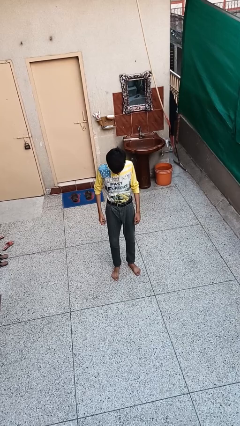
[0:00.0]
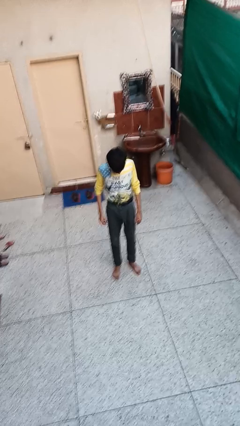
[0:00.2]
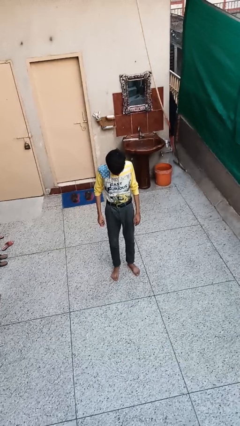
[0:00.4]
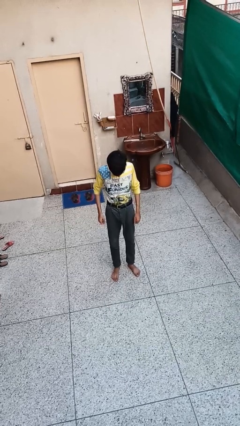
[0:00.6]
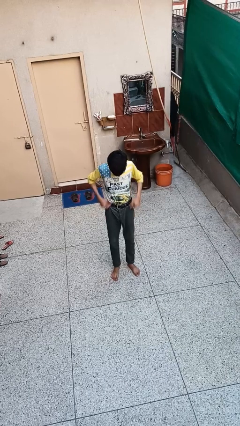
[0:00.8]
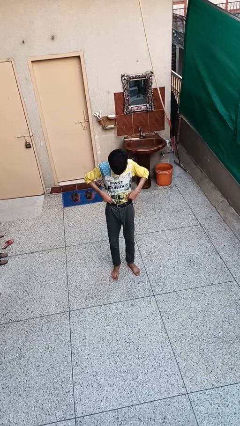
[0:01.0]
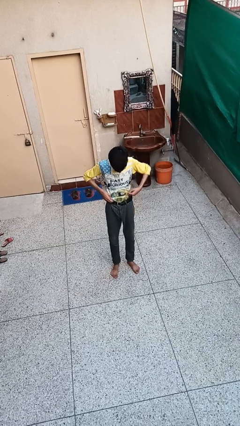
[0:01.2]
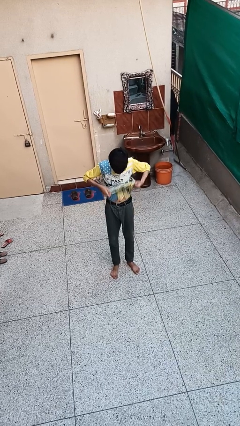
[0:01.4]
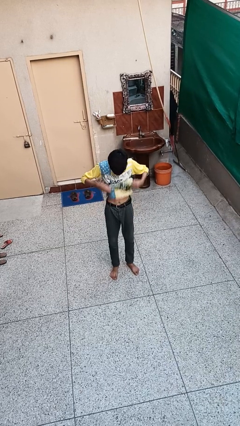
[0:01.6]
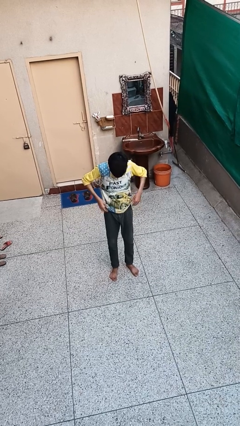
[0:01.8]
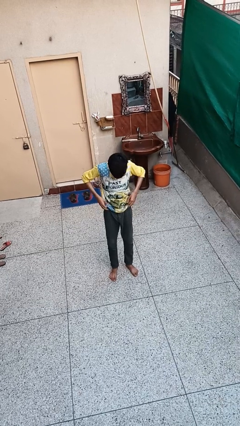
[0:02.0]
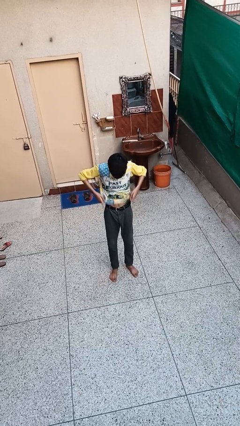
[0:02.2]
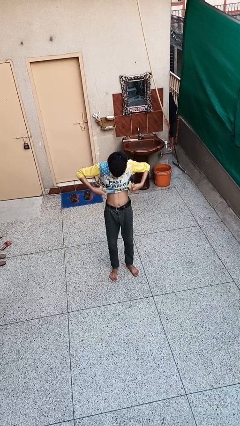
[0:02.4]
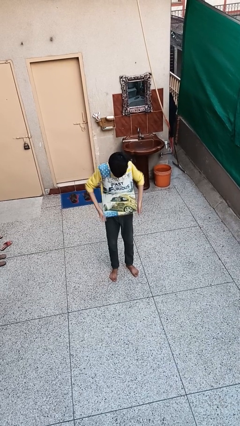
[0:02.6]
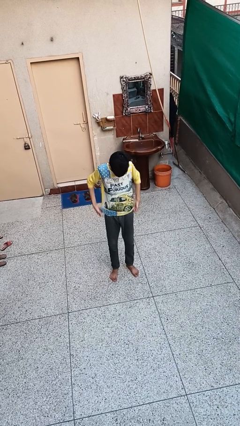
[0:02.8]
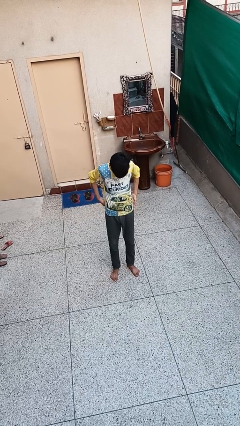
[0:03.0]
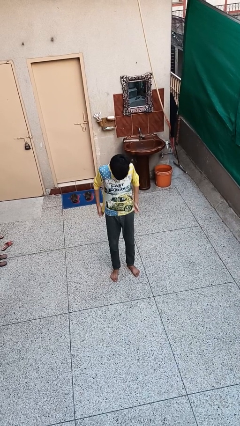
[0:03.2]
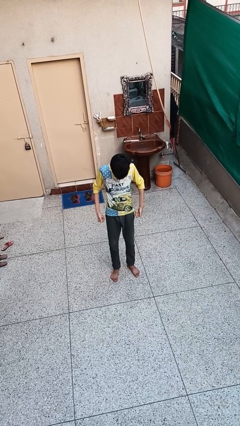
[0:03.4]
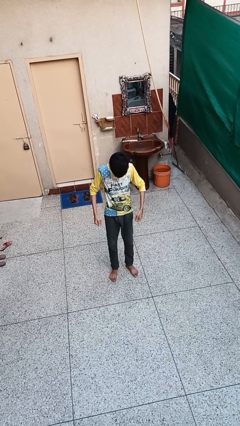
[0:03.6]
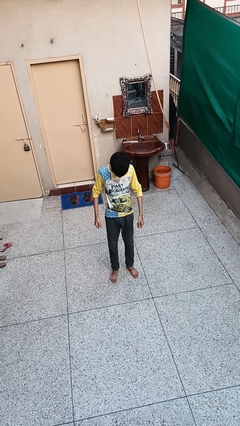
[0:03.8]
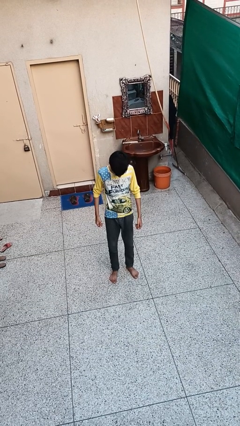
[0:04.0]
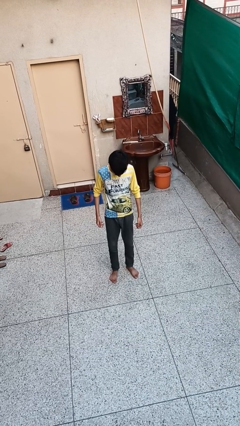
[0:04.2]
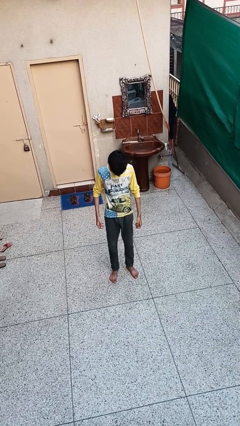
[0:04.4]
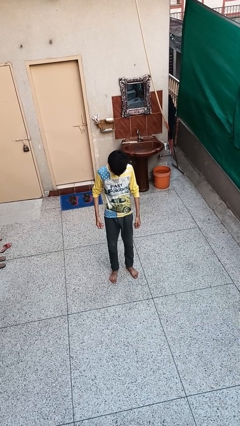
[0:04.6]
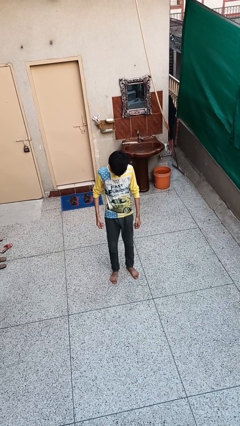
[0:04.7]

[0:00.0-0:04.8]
person untucks shirt

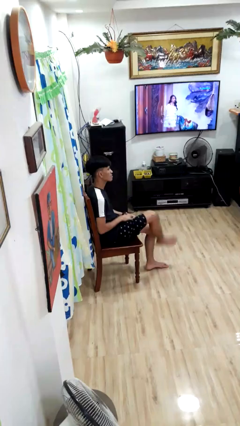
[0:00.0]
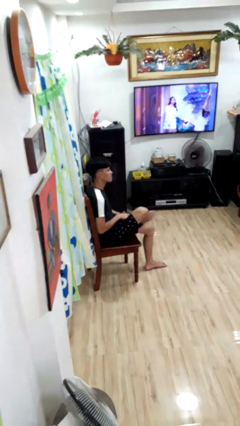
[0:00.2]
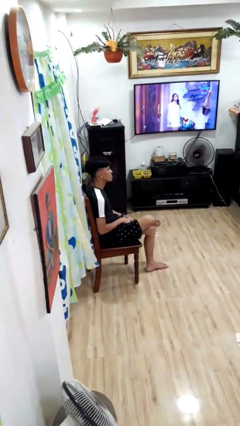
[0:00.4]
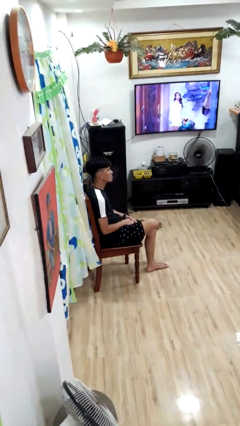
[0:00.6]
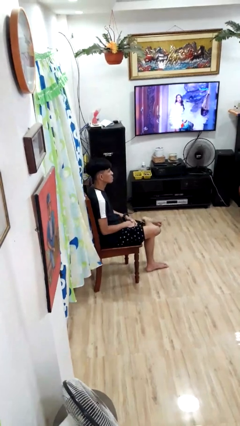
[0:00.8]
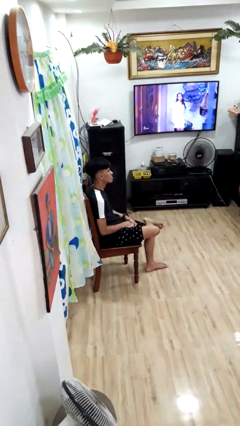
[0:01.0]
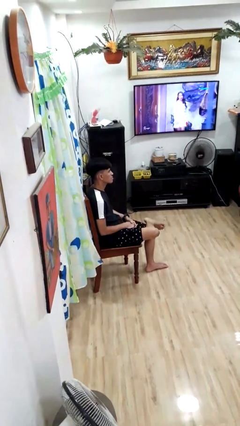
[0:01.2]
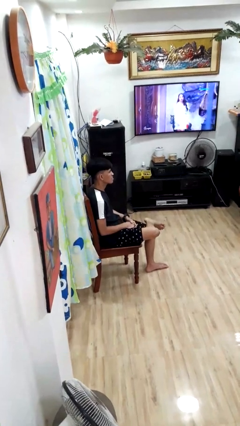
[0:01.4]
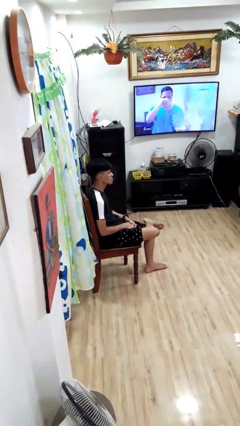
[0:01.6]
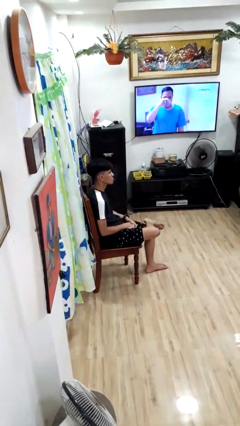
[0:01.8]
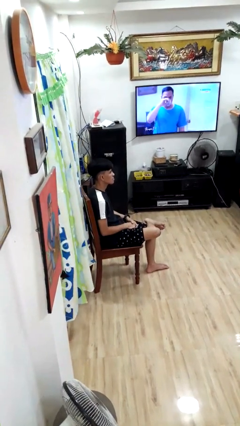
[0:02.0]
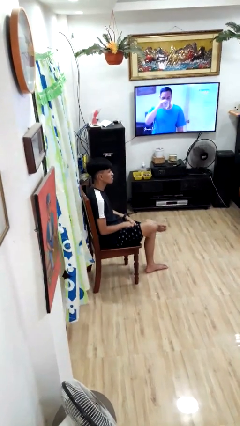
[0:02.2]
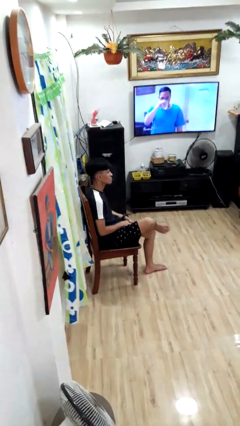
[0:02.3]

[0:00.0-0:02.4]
person crosses legs

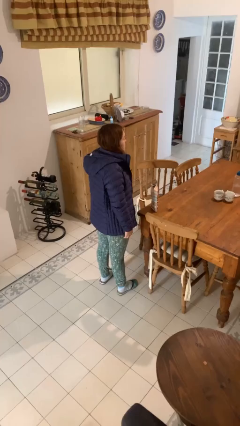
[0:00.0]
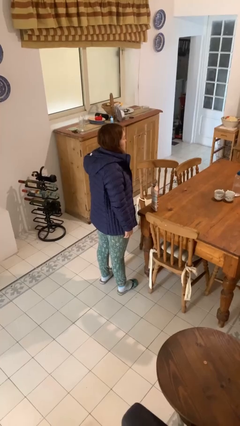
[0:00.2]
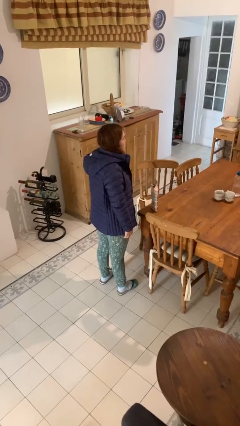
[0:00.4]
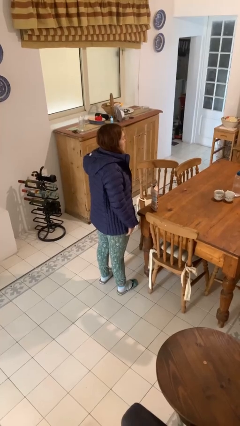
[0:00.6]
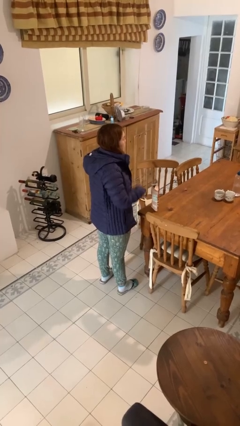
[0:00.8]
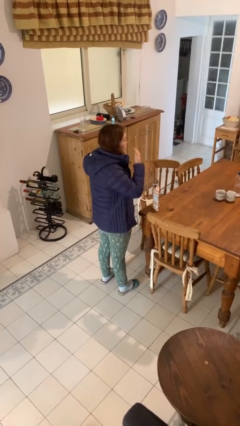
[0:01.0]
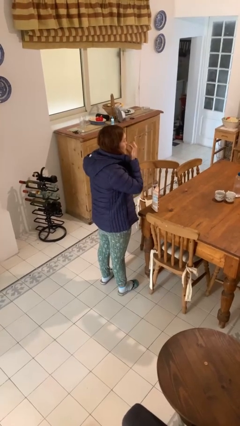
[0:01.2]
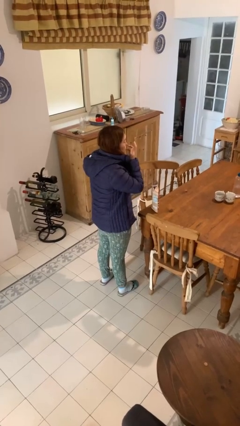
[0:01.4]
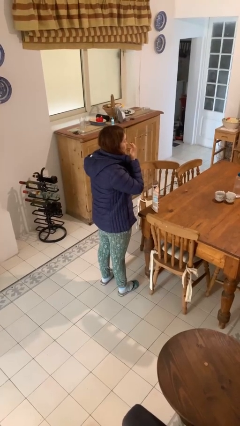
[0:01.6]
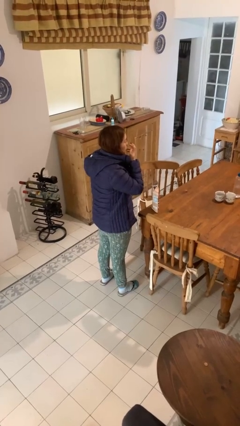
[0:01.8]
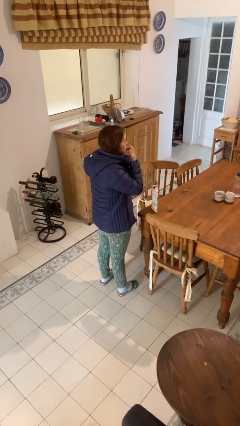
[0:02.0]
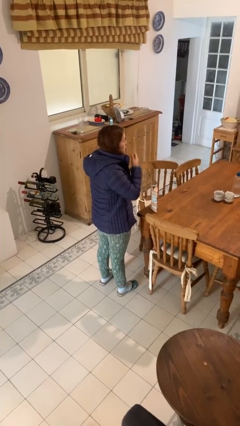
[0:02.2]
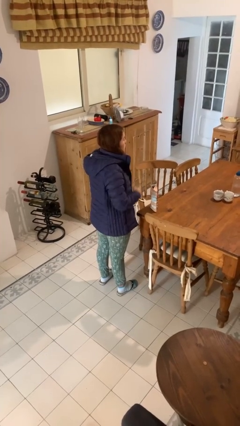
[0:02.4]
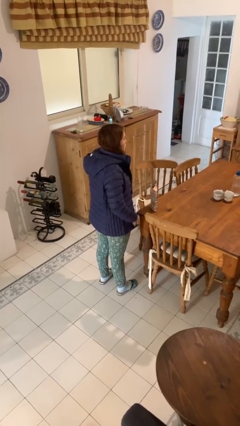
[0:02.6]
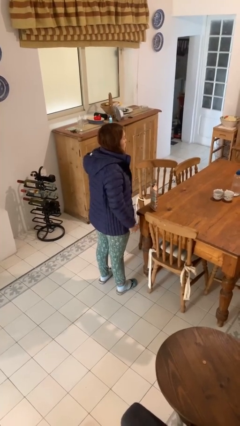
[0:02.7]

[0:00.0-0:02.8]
person licks fingers

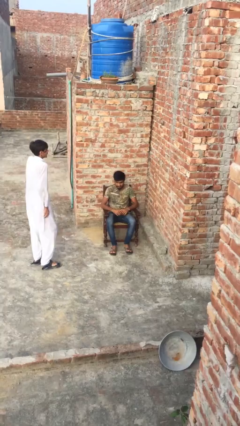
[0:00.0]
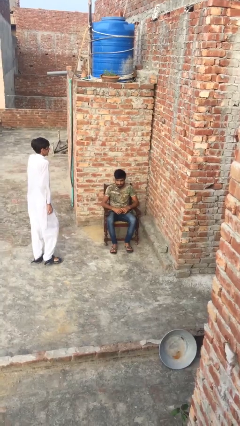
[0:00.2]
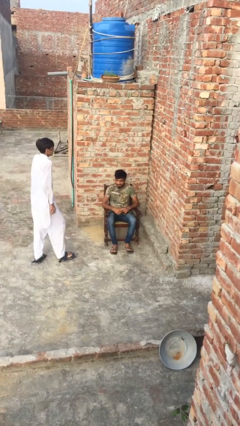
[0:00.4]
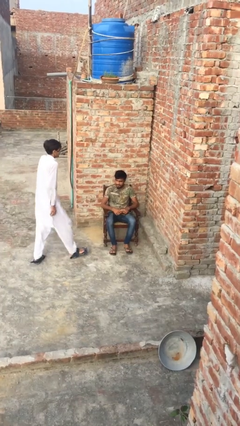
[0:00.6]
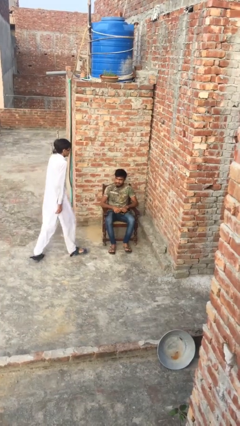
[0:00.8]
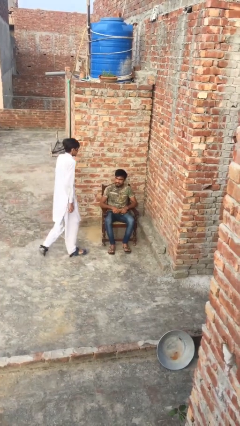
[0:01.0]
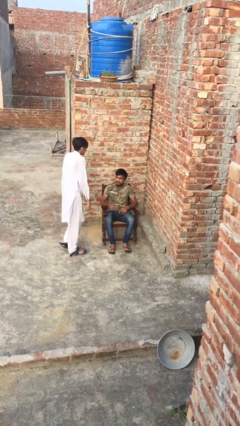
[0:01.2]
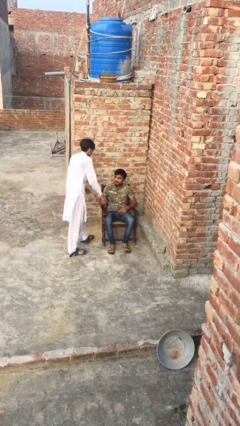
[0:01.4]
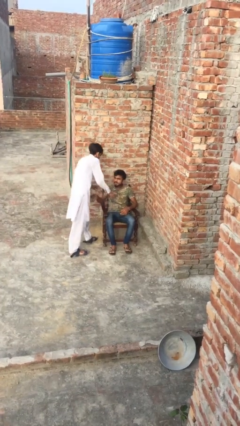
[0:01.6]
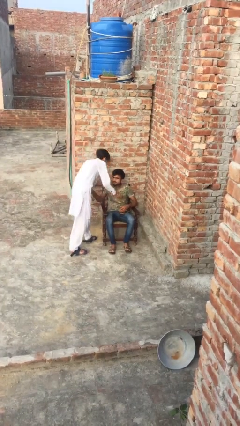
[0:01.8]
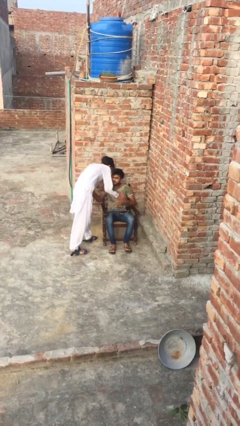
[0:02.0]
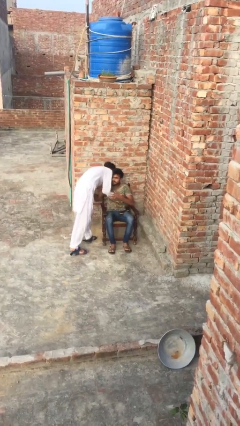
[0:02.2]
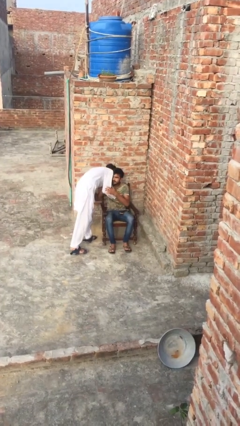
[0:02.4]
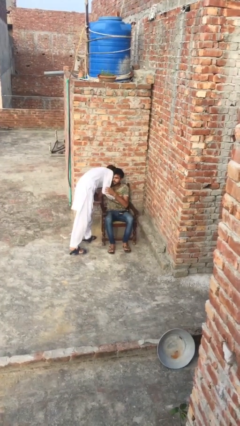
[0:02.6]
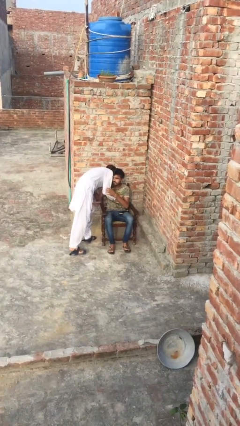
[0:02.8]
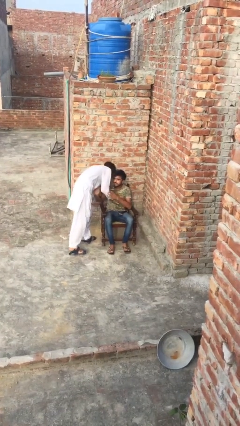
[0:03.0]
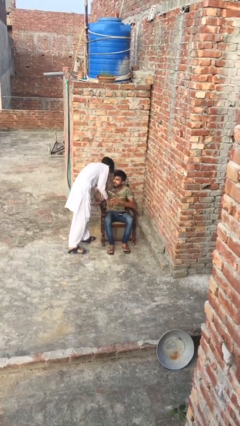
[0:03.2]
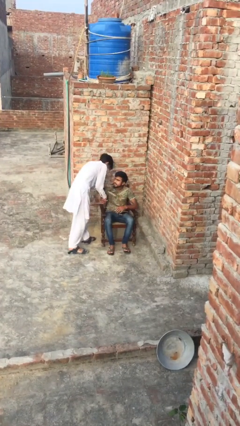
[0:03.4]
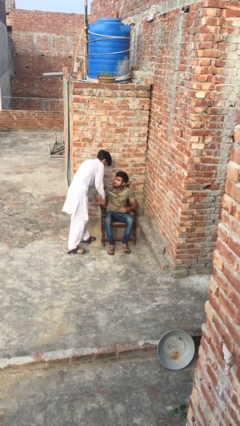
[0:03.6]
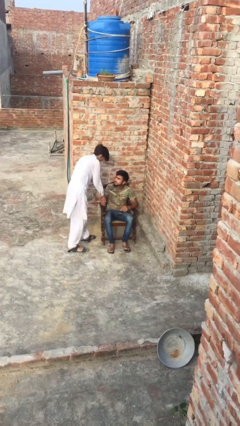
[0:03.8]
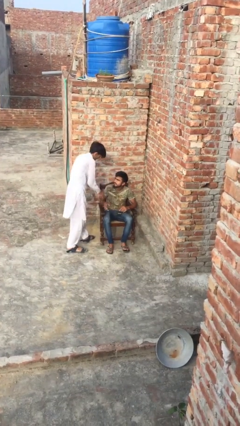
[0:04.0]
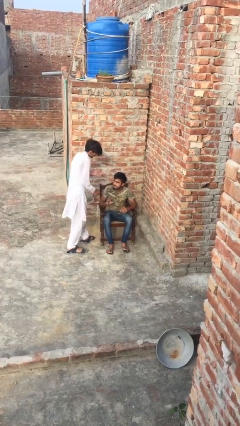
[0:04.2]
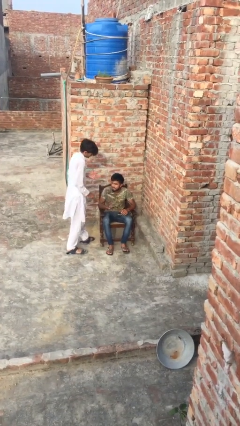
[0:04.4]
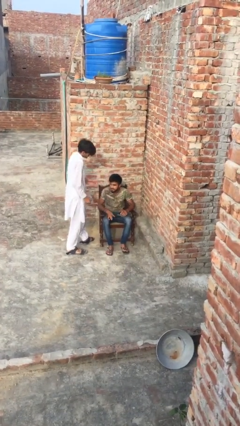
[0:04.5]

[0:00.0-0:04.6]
person embraces person

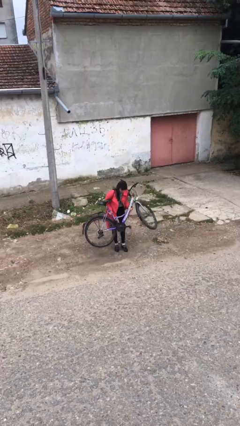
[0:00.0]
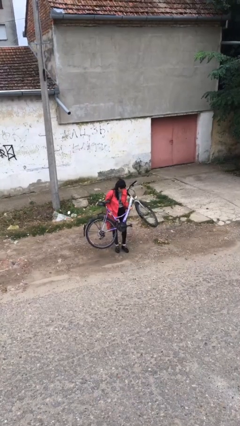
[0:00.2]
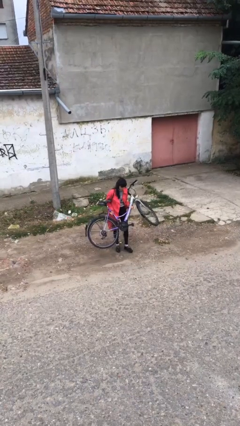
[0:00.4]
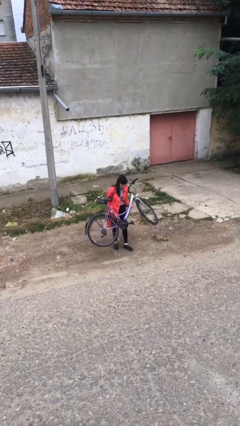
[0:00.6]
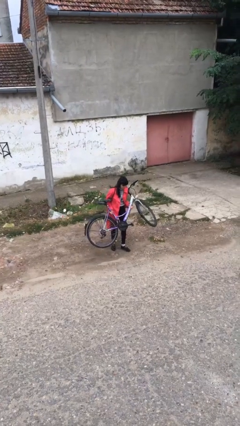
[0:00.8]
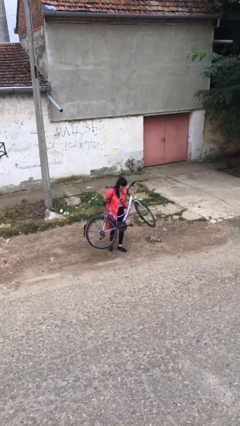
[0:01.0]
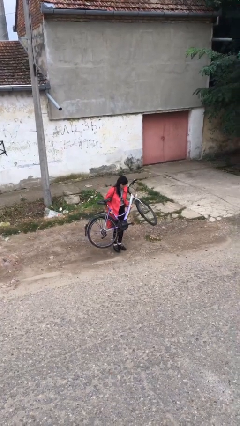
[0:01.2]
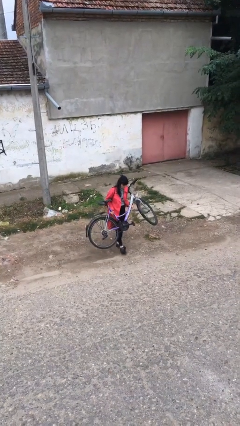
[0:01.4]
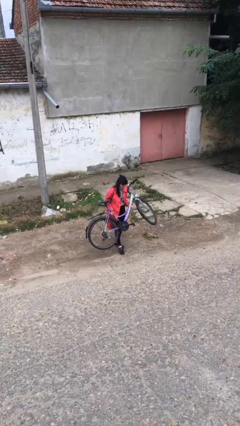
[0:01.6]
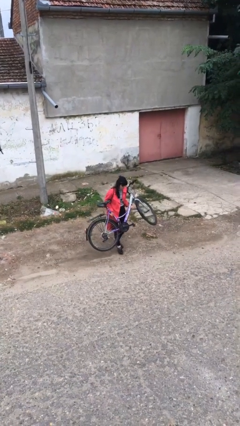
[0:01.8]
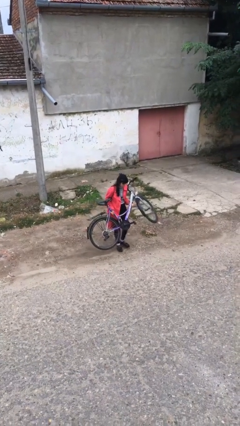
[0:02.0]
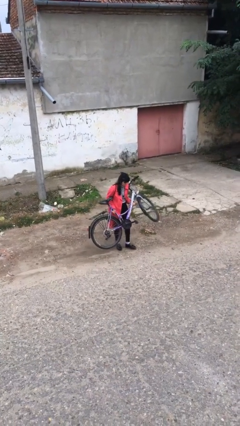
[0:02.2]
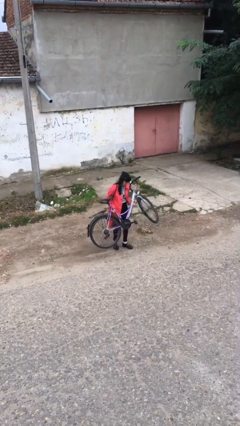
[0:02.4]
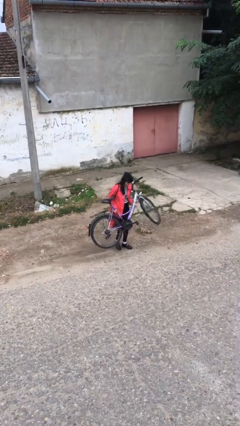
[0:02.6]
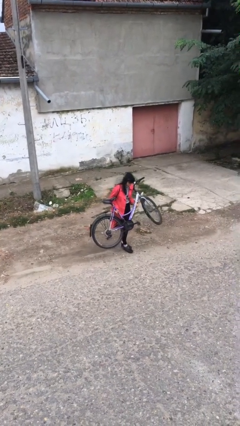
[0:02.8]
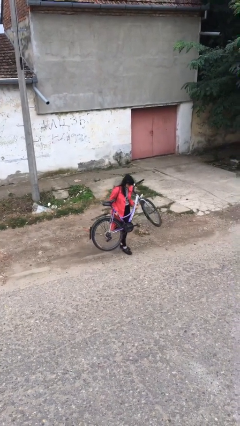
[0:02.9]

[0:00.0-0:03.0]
person carries heavy object
